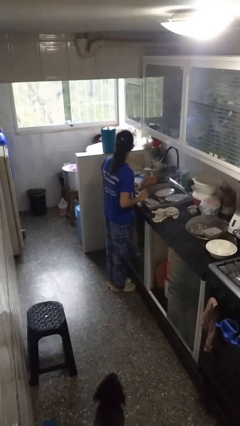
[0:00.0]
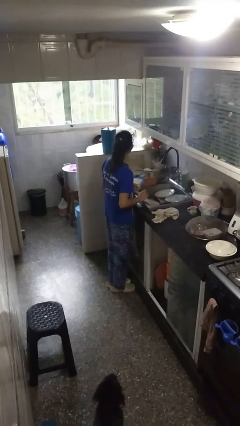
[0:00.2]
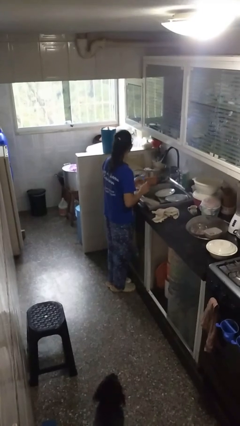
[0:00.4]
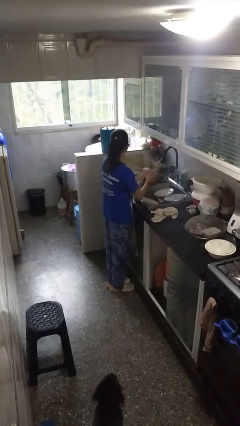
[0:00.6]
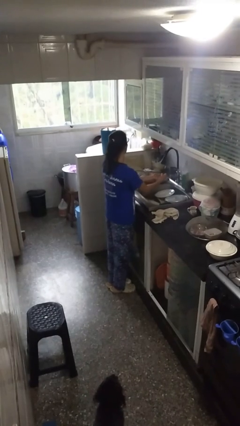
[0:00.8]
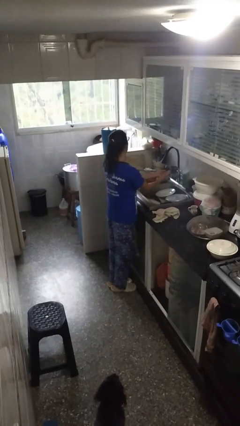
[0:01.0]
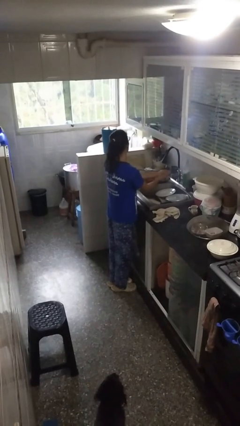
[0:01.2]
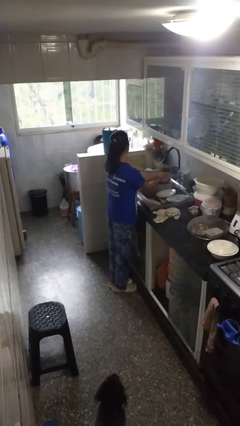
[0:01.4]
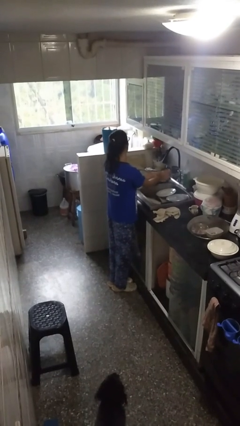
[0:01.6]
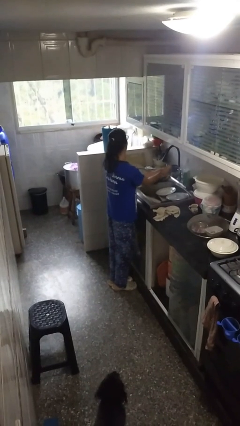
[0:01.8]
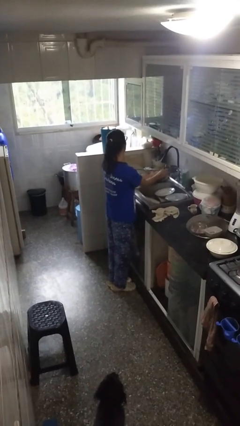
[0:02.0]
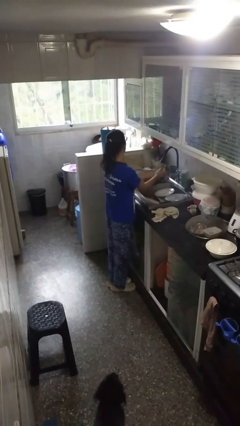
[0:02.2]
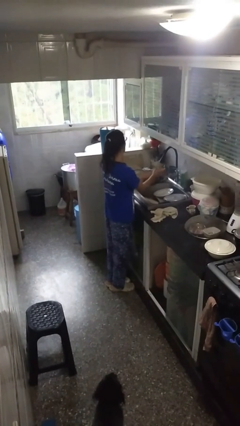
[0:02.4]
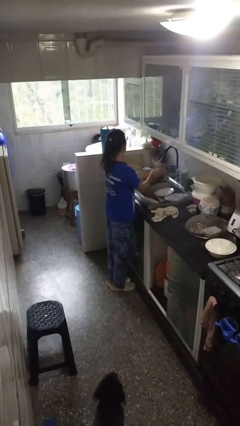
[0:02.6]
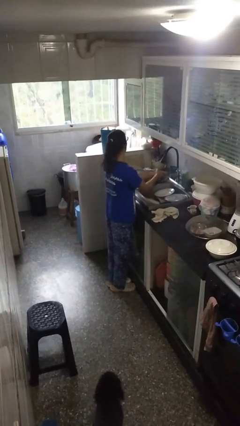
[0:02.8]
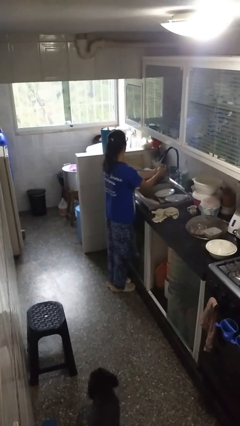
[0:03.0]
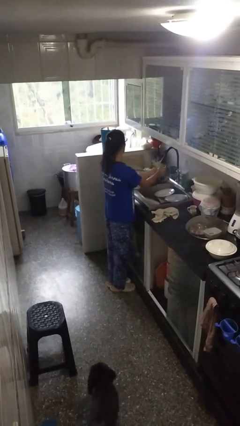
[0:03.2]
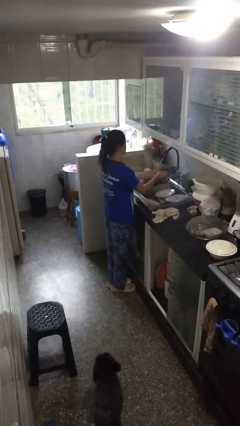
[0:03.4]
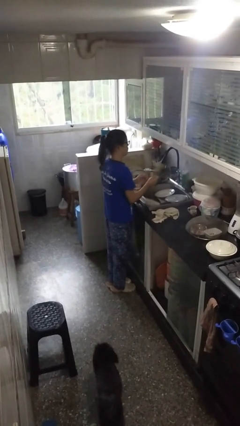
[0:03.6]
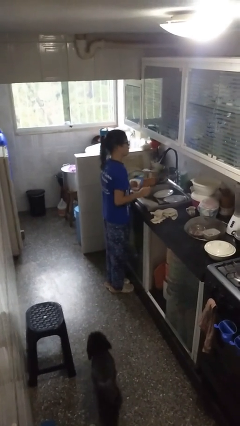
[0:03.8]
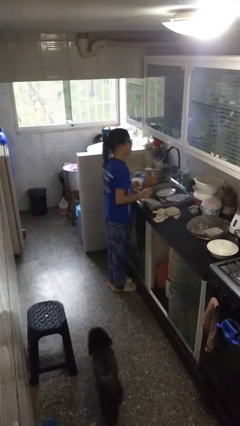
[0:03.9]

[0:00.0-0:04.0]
person washes hands

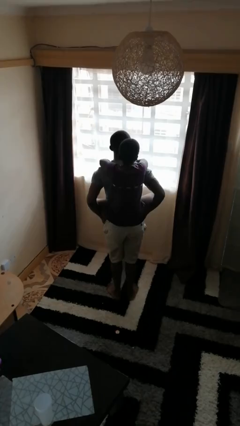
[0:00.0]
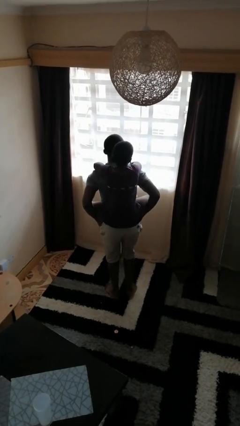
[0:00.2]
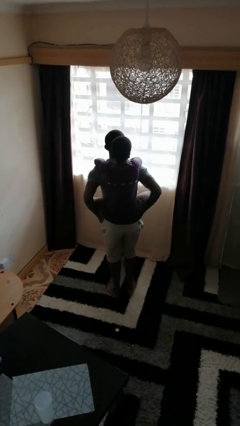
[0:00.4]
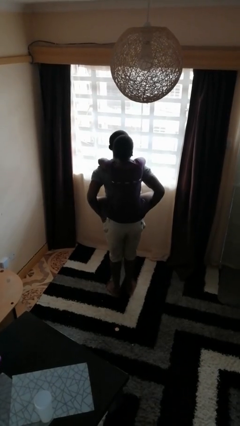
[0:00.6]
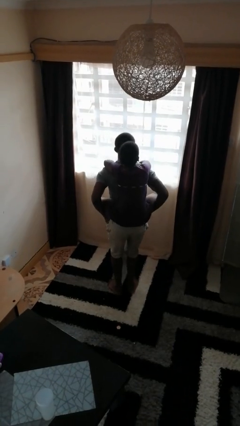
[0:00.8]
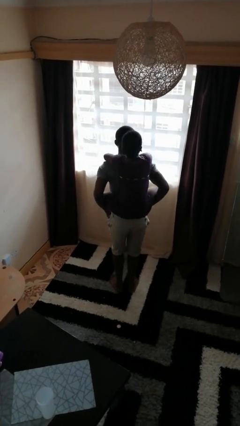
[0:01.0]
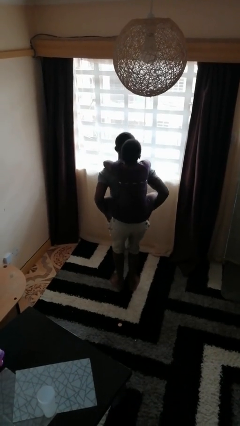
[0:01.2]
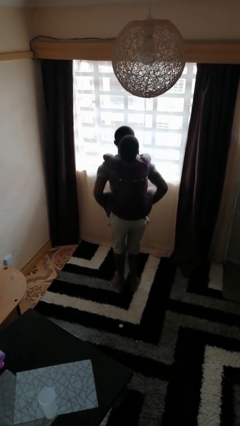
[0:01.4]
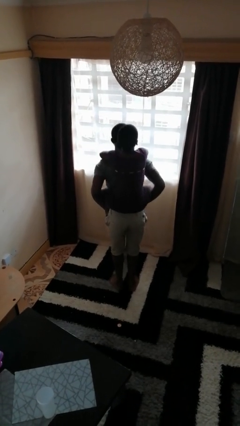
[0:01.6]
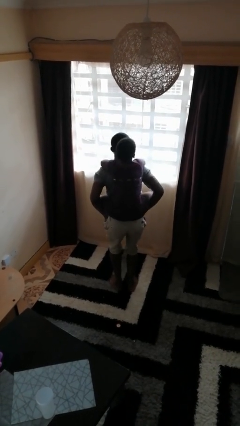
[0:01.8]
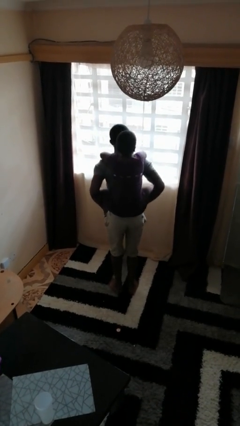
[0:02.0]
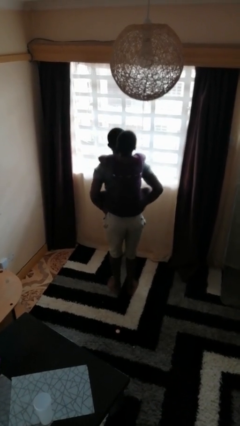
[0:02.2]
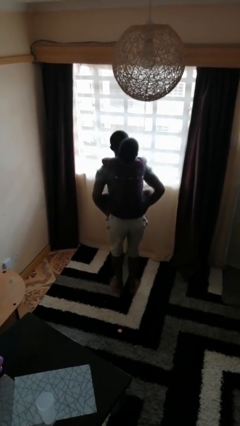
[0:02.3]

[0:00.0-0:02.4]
person carries person on back

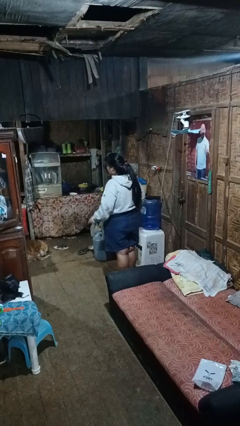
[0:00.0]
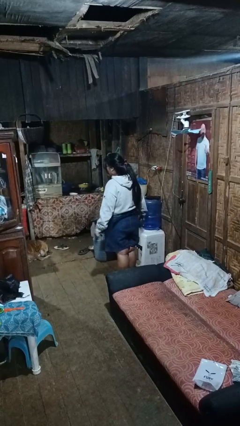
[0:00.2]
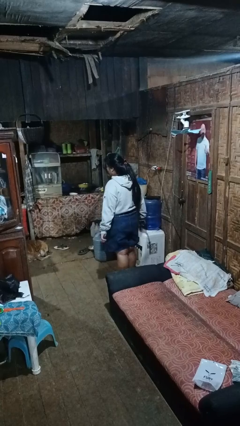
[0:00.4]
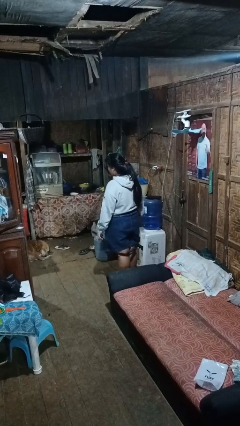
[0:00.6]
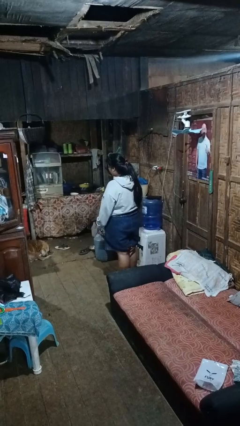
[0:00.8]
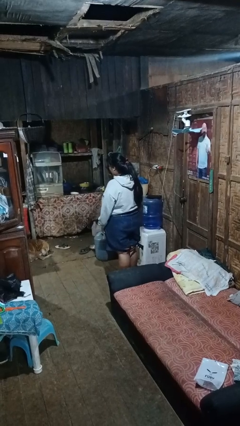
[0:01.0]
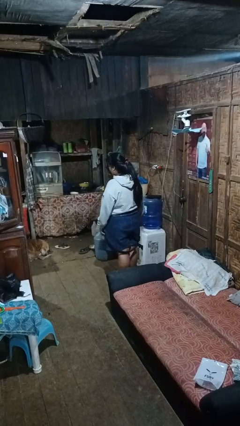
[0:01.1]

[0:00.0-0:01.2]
person takes off belt

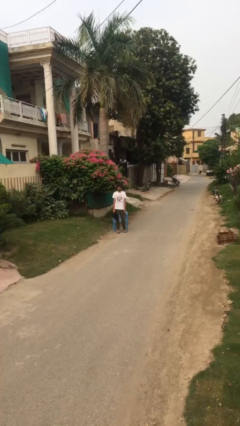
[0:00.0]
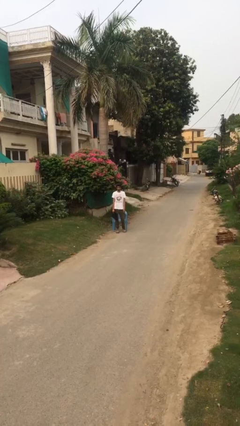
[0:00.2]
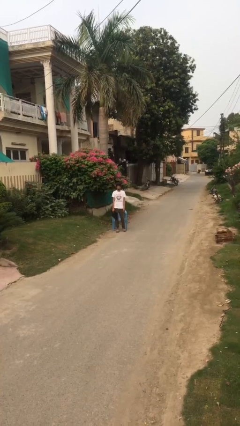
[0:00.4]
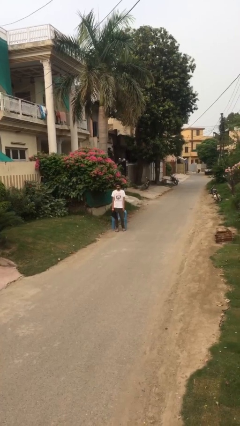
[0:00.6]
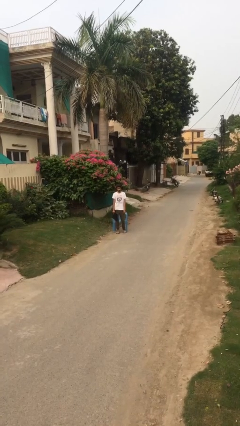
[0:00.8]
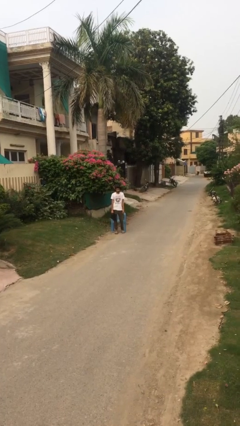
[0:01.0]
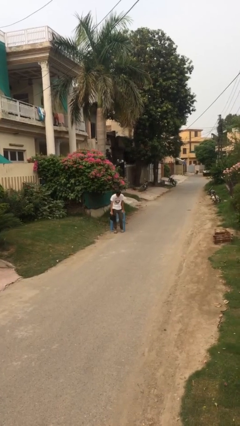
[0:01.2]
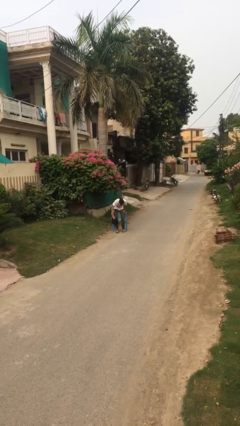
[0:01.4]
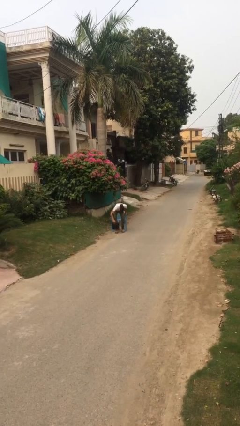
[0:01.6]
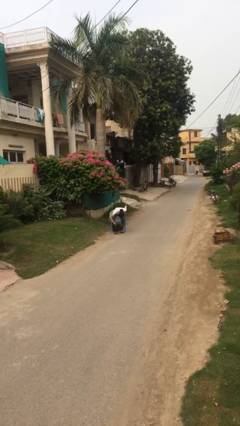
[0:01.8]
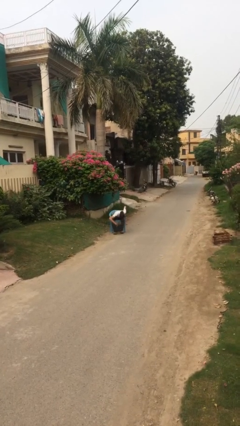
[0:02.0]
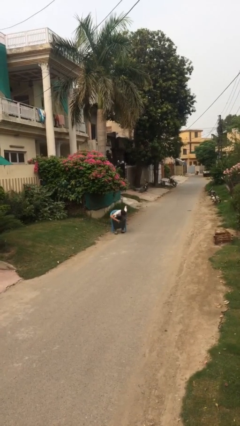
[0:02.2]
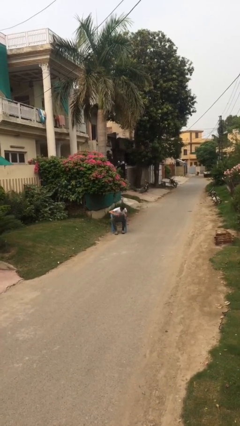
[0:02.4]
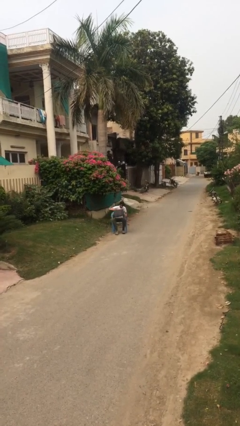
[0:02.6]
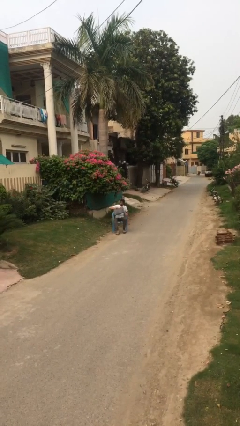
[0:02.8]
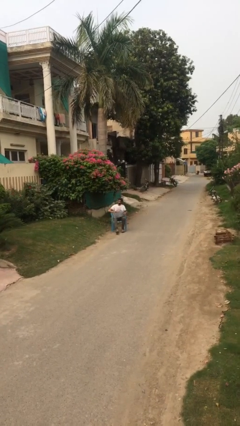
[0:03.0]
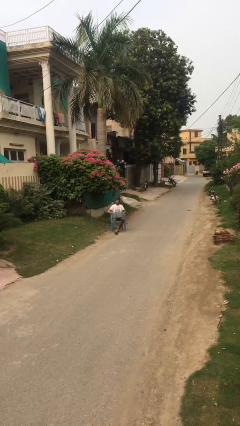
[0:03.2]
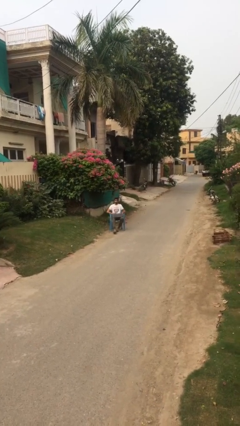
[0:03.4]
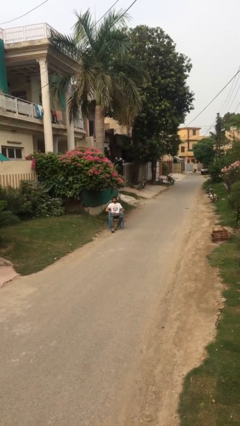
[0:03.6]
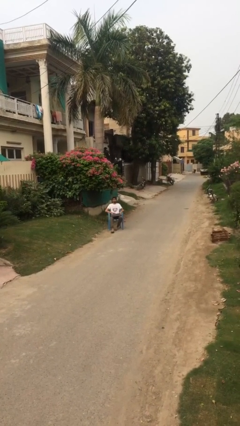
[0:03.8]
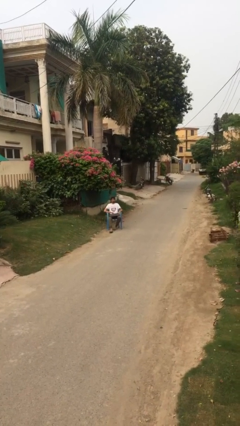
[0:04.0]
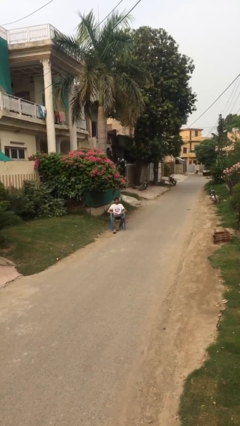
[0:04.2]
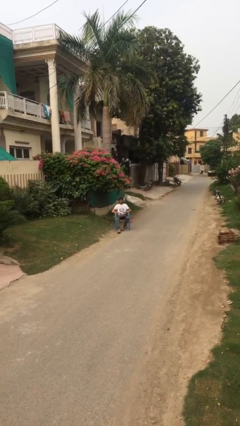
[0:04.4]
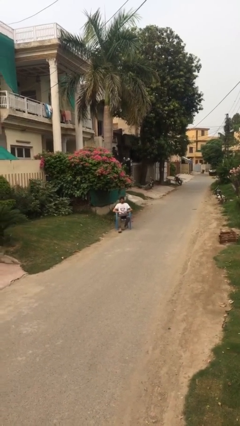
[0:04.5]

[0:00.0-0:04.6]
person sits down

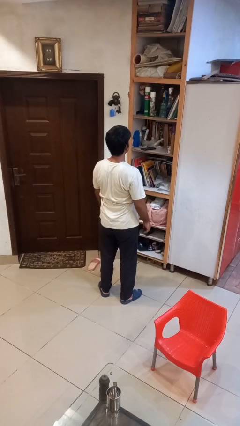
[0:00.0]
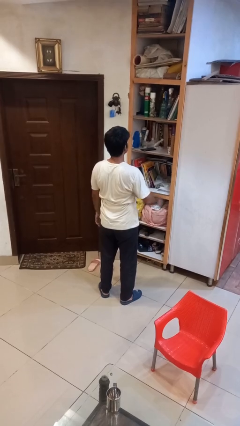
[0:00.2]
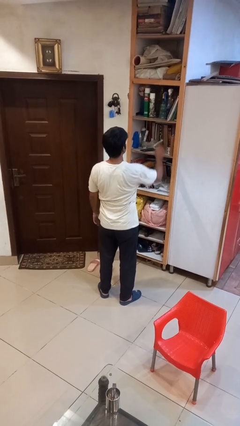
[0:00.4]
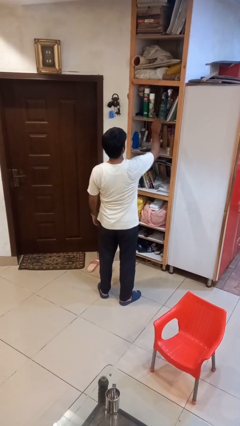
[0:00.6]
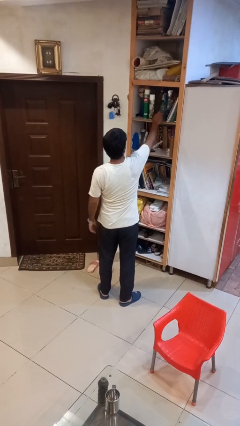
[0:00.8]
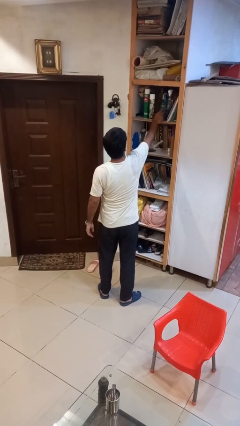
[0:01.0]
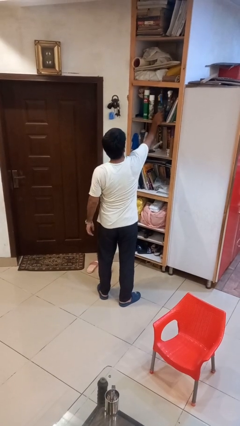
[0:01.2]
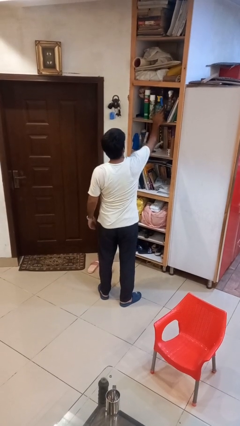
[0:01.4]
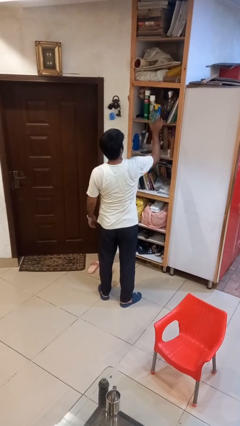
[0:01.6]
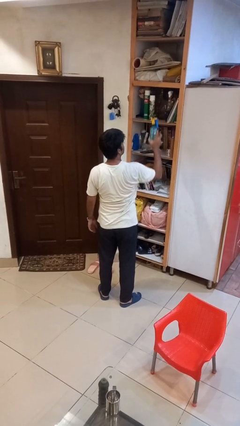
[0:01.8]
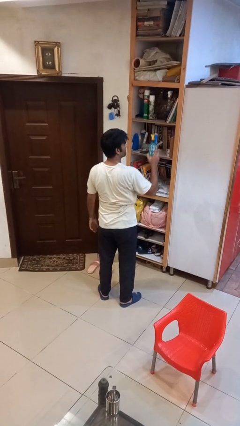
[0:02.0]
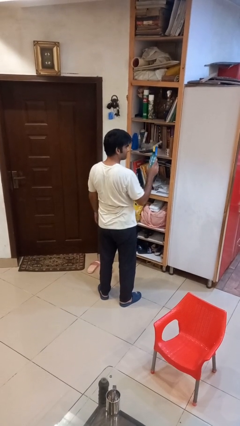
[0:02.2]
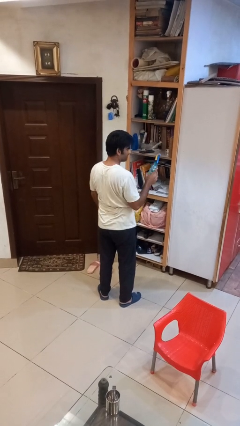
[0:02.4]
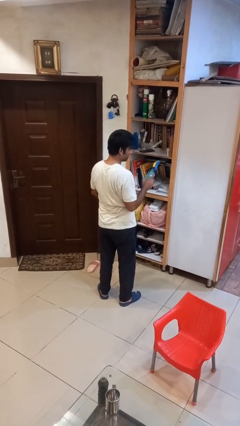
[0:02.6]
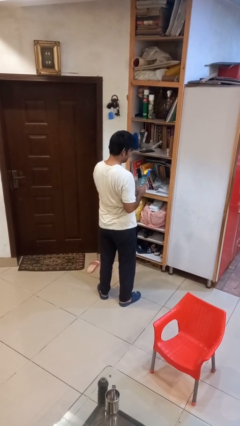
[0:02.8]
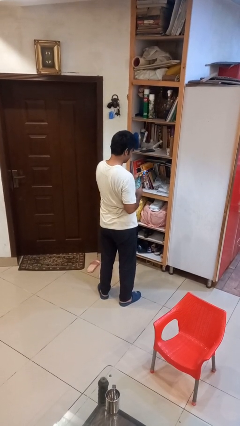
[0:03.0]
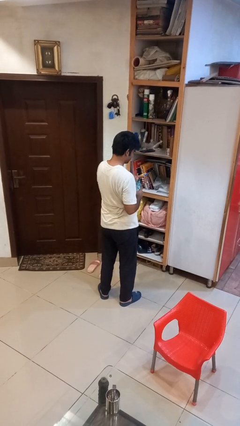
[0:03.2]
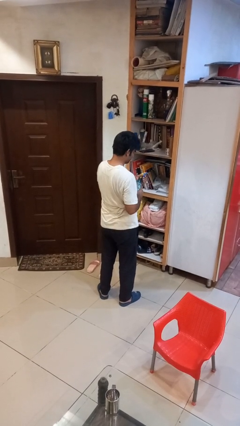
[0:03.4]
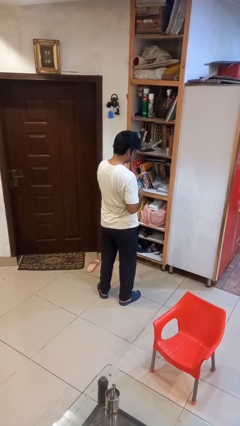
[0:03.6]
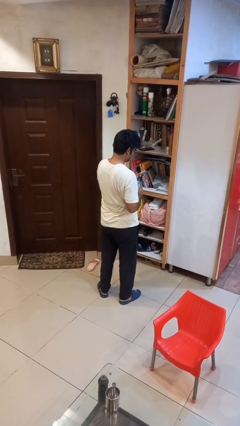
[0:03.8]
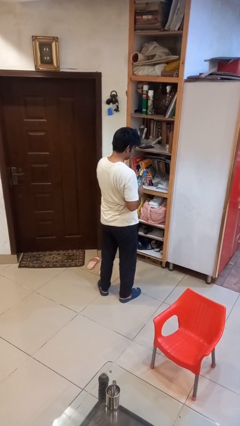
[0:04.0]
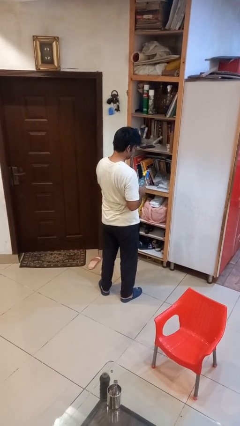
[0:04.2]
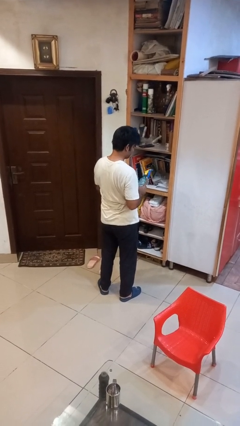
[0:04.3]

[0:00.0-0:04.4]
person picks up object from shelf

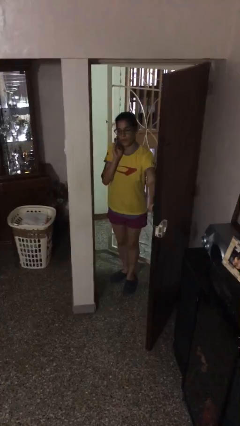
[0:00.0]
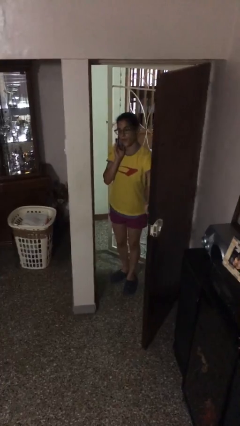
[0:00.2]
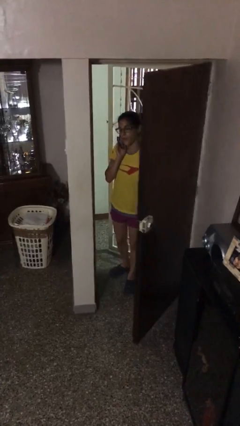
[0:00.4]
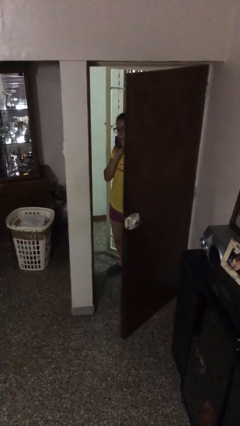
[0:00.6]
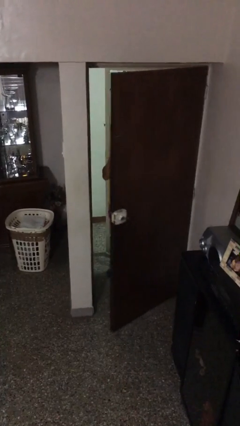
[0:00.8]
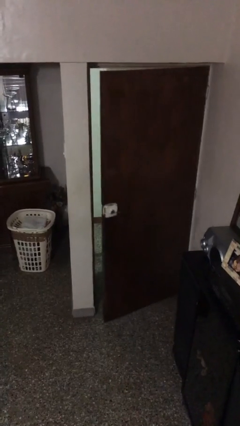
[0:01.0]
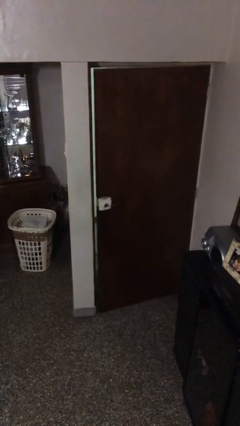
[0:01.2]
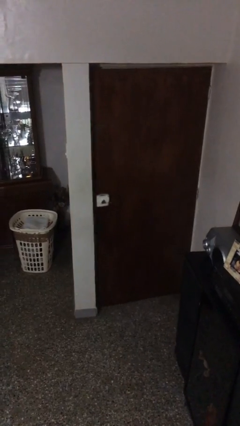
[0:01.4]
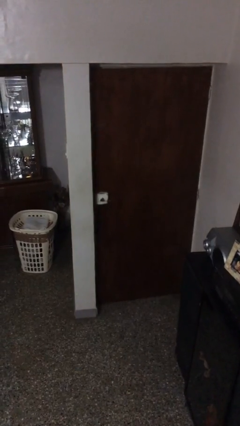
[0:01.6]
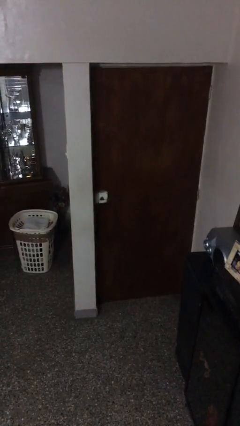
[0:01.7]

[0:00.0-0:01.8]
person closes facility door
